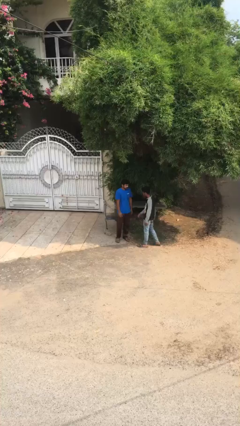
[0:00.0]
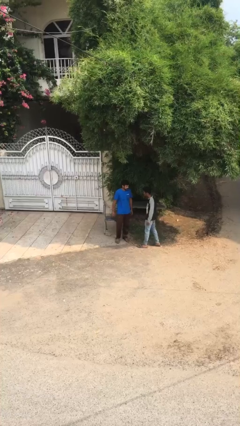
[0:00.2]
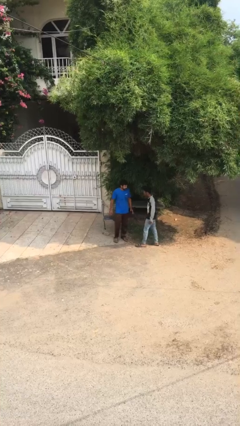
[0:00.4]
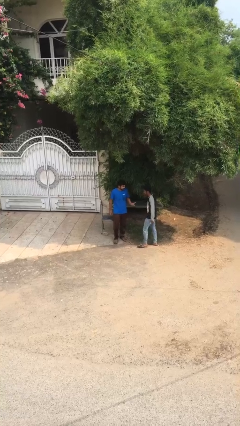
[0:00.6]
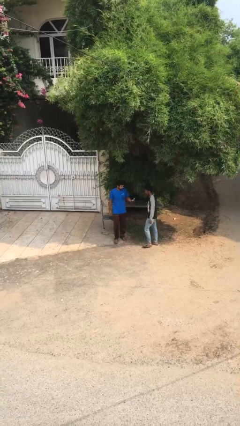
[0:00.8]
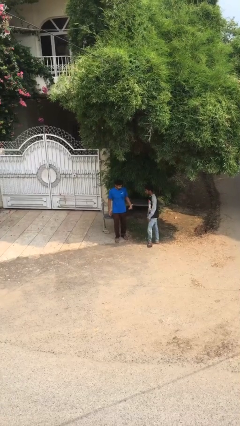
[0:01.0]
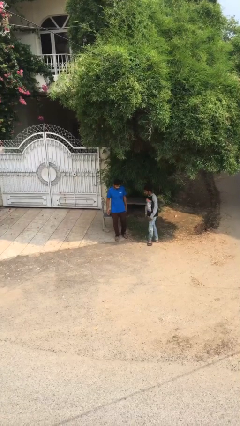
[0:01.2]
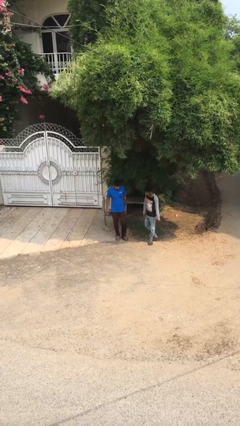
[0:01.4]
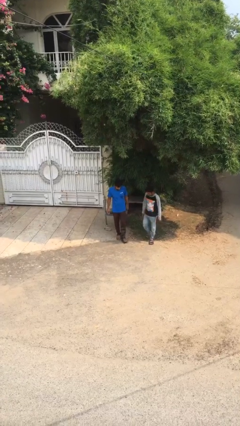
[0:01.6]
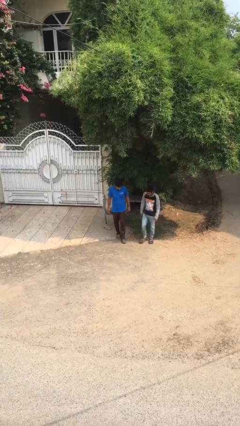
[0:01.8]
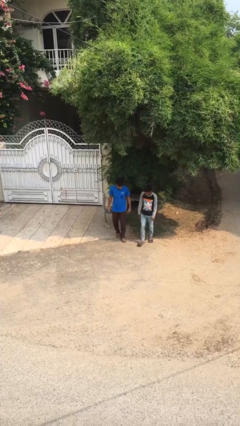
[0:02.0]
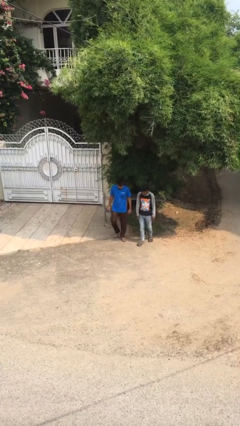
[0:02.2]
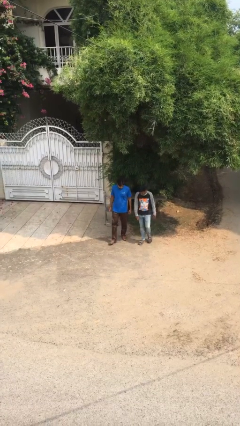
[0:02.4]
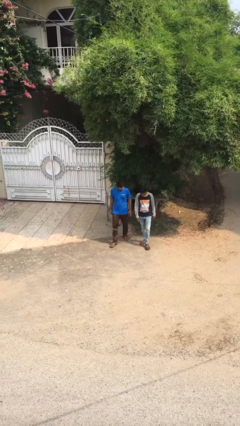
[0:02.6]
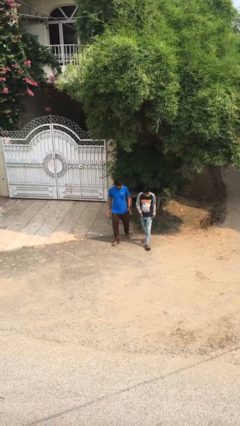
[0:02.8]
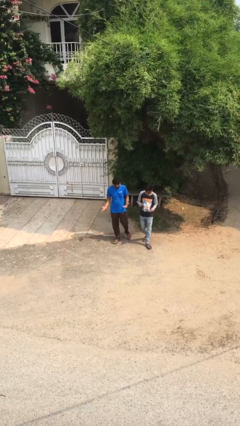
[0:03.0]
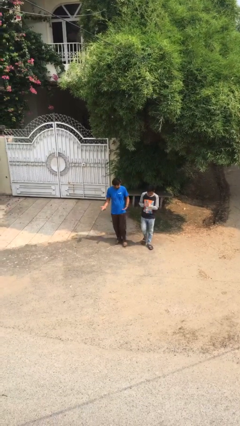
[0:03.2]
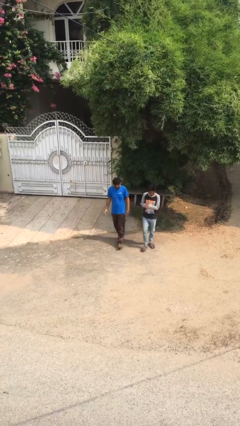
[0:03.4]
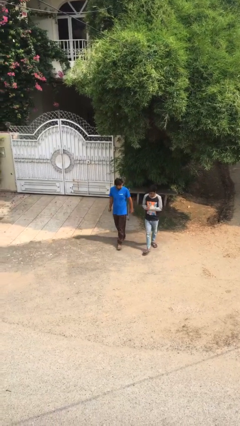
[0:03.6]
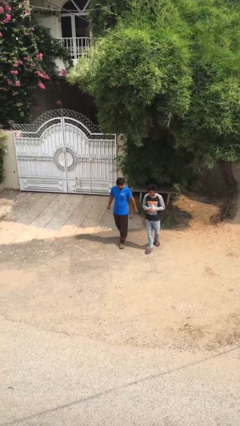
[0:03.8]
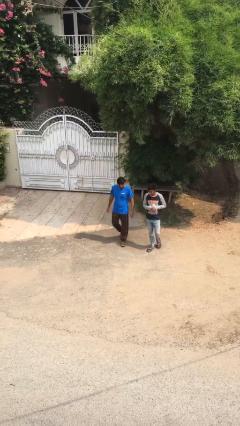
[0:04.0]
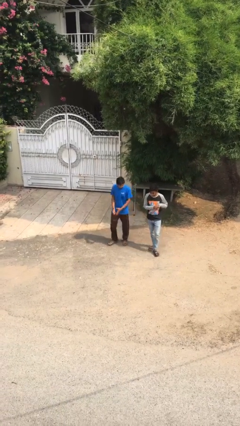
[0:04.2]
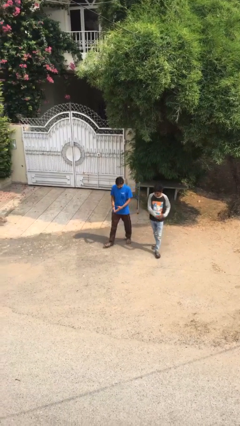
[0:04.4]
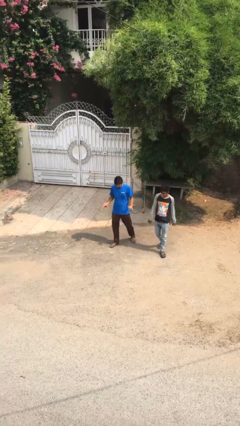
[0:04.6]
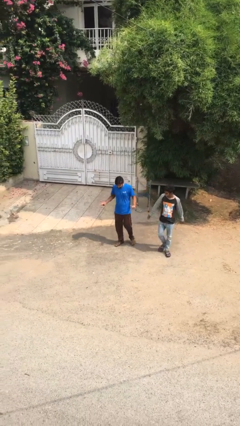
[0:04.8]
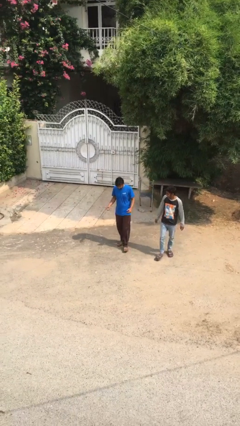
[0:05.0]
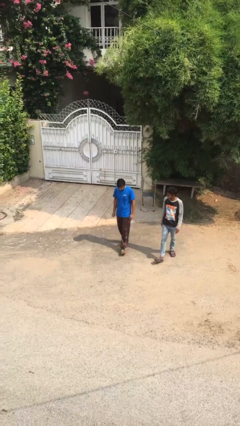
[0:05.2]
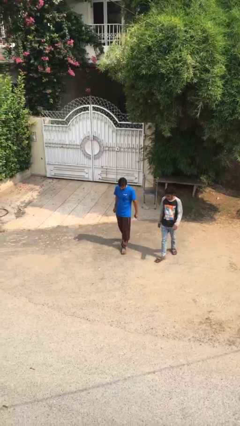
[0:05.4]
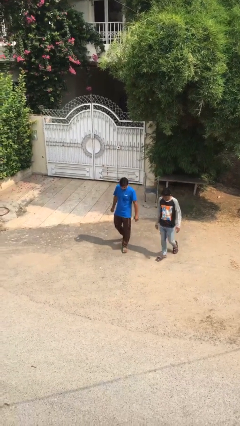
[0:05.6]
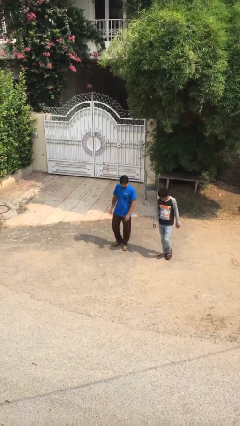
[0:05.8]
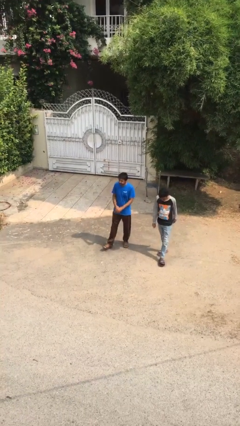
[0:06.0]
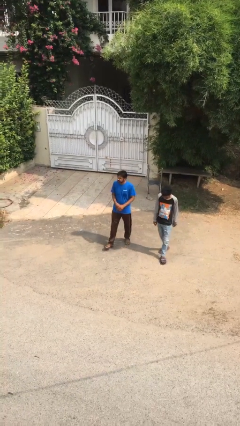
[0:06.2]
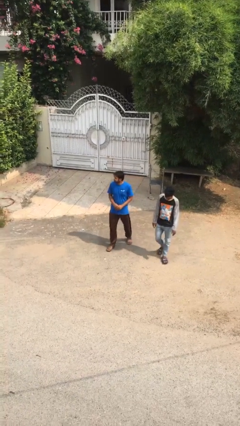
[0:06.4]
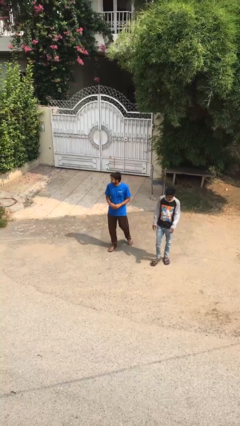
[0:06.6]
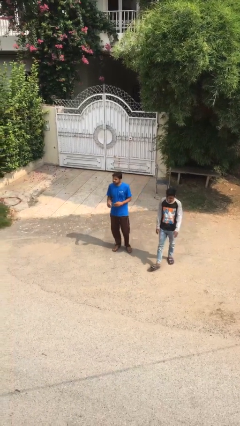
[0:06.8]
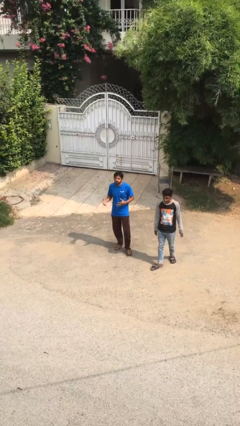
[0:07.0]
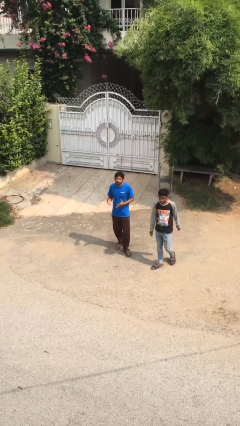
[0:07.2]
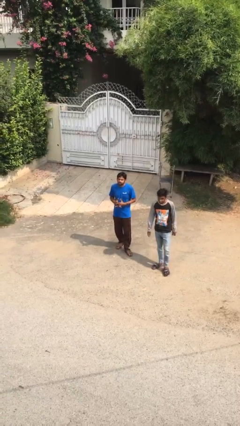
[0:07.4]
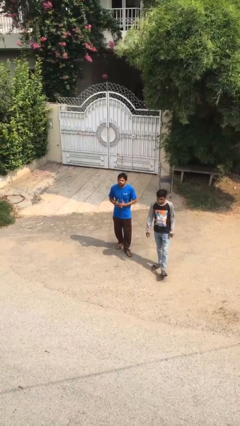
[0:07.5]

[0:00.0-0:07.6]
person talks to person

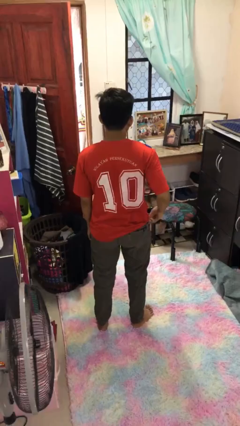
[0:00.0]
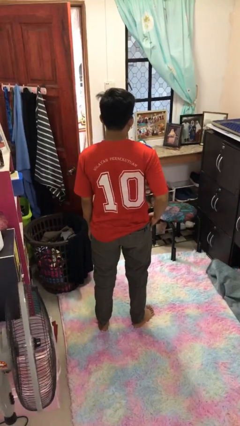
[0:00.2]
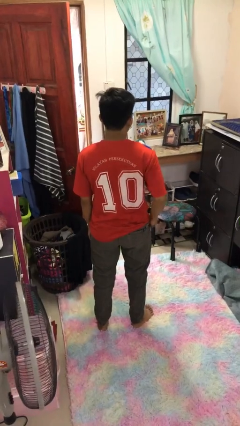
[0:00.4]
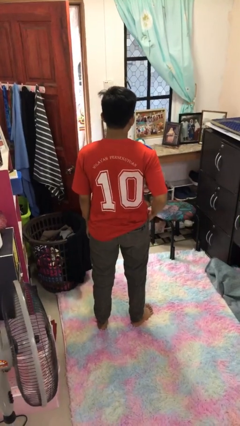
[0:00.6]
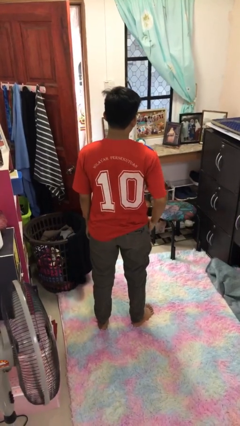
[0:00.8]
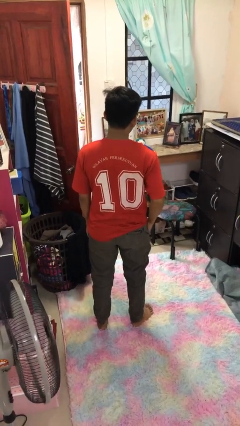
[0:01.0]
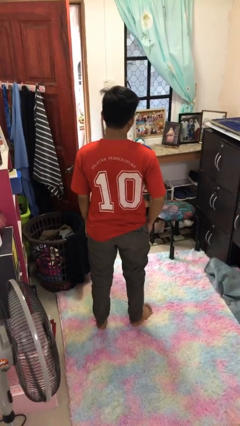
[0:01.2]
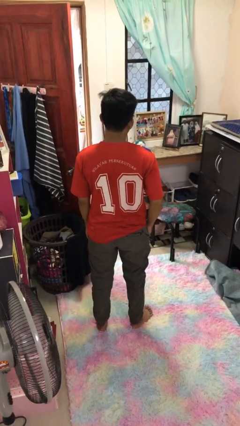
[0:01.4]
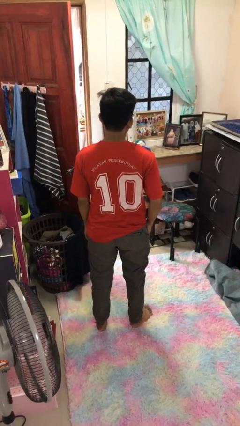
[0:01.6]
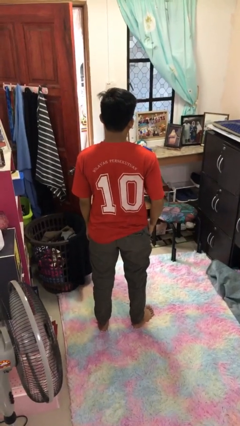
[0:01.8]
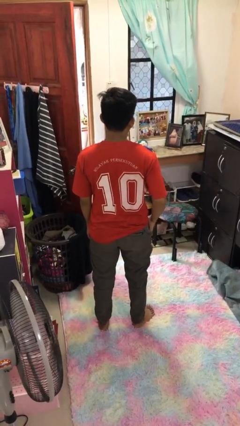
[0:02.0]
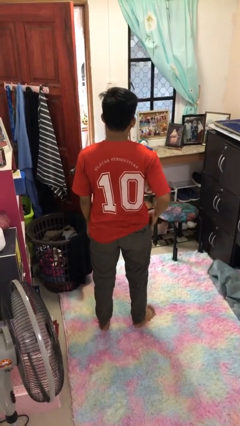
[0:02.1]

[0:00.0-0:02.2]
person puts hands in back pockets

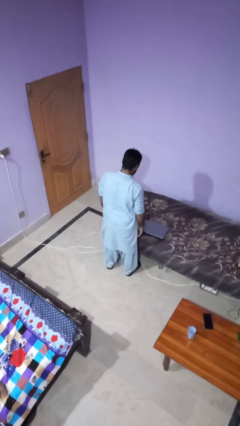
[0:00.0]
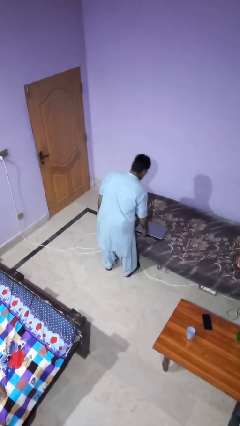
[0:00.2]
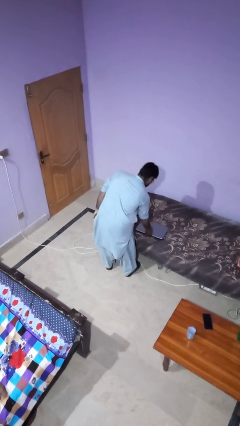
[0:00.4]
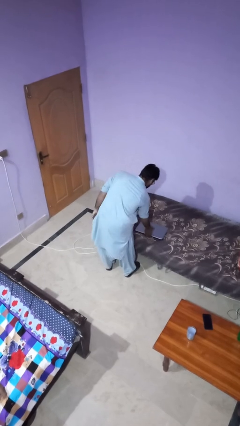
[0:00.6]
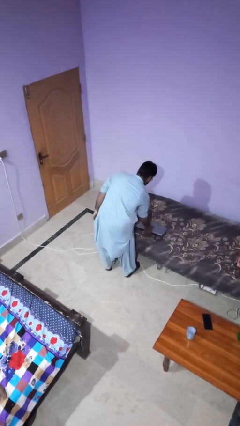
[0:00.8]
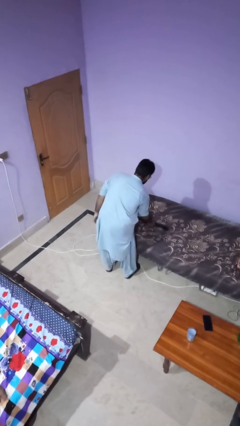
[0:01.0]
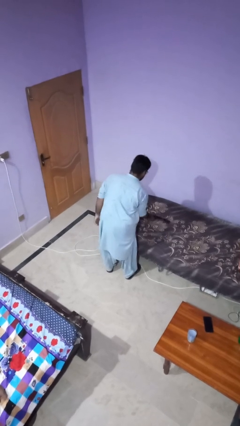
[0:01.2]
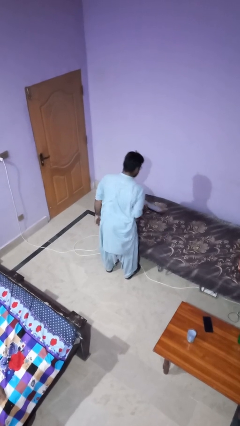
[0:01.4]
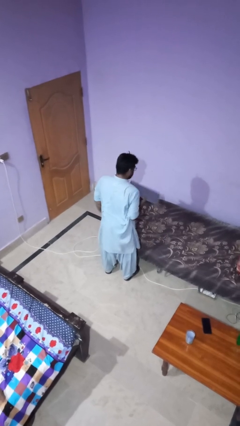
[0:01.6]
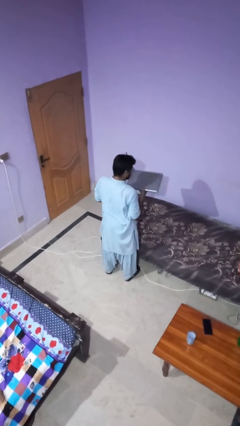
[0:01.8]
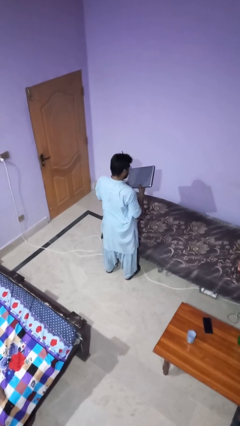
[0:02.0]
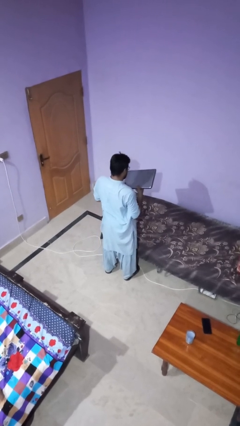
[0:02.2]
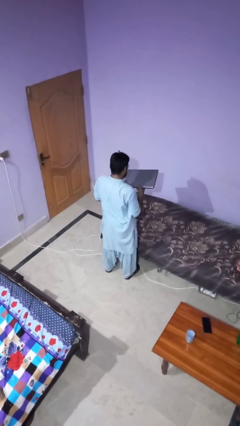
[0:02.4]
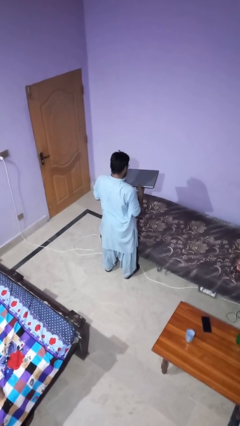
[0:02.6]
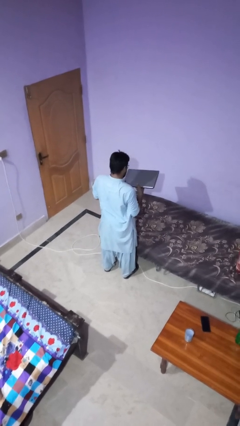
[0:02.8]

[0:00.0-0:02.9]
person picks up object from bed

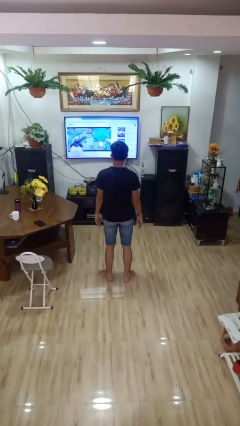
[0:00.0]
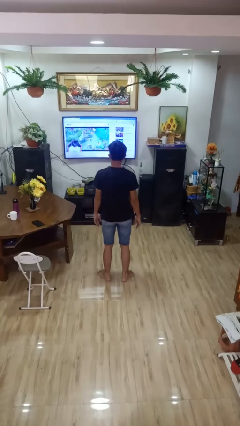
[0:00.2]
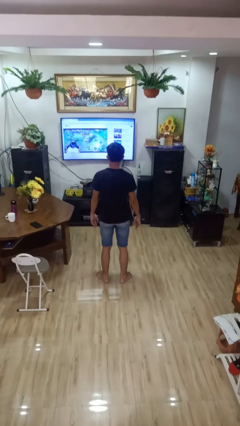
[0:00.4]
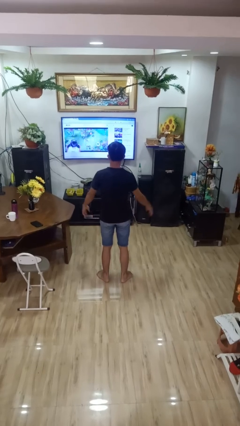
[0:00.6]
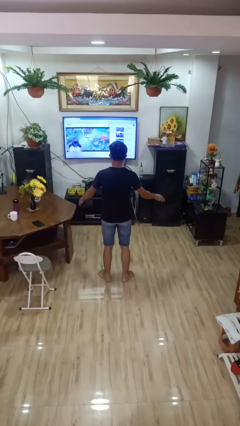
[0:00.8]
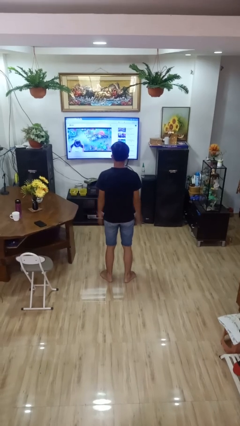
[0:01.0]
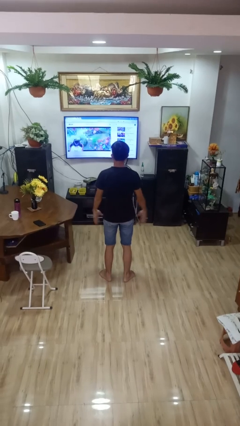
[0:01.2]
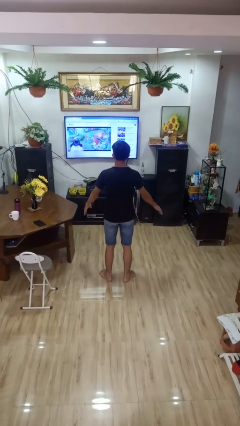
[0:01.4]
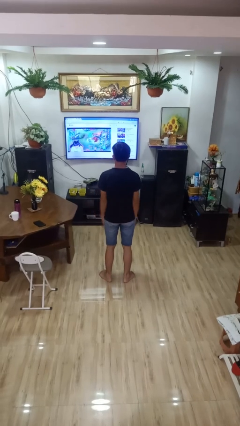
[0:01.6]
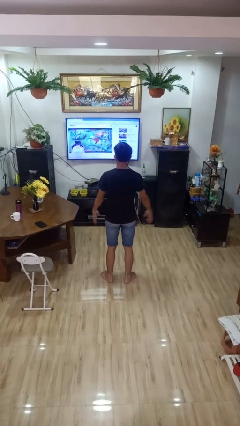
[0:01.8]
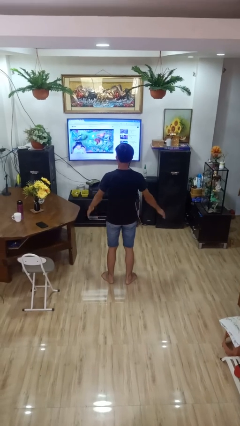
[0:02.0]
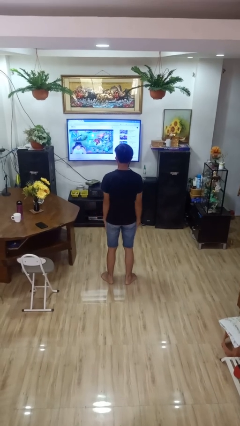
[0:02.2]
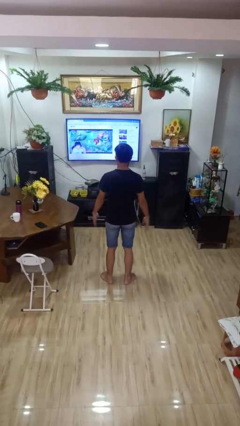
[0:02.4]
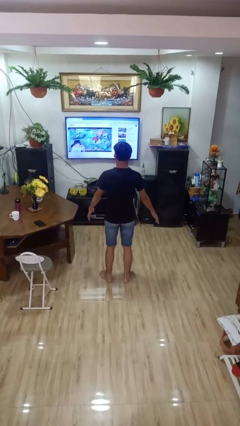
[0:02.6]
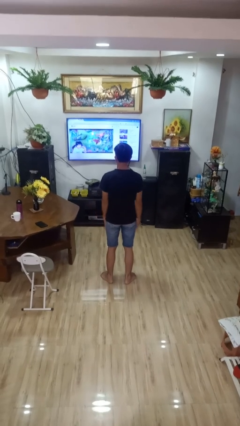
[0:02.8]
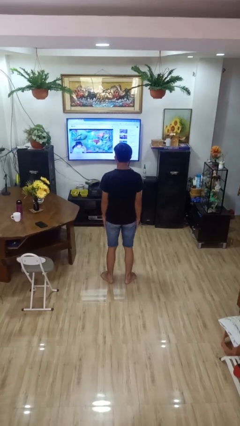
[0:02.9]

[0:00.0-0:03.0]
person slaps hands on thighs

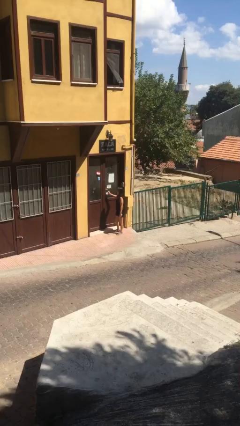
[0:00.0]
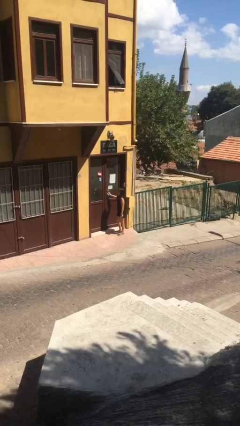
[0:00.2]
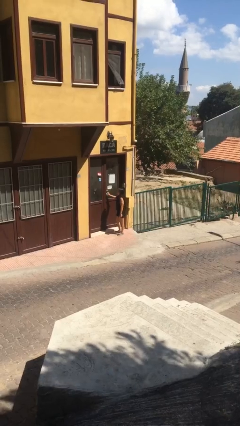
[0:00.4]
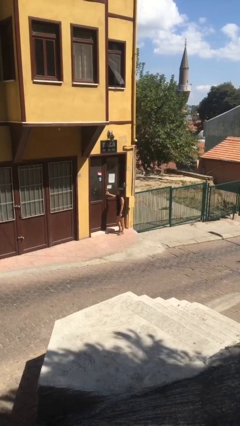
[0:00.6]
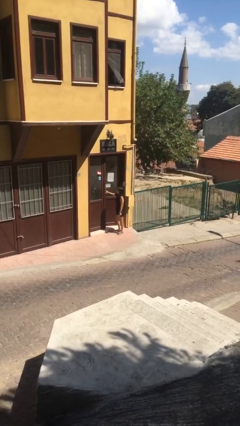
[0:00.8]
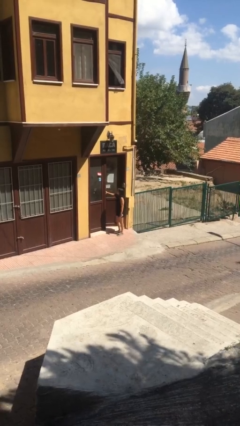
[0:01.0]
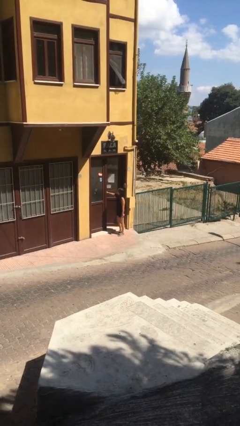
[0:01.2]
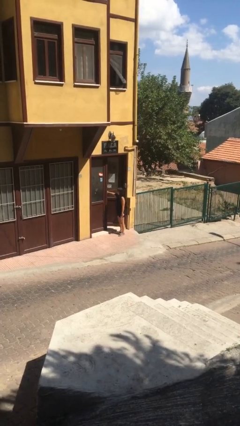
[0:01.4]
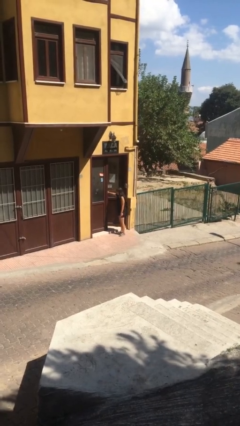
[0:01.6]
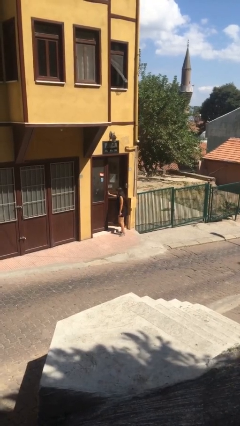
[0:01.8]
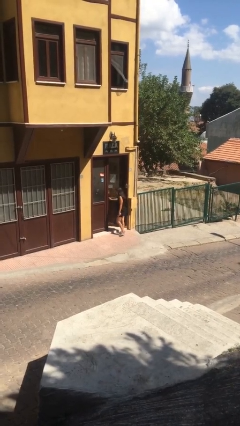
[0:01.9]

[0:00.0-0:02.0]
person opens facility door
